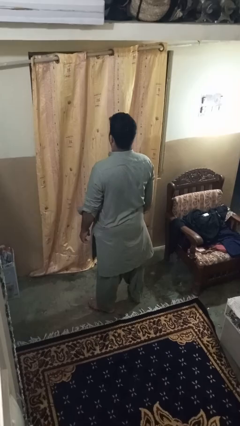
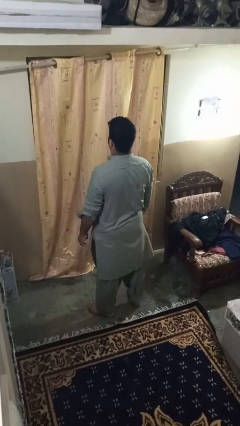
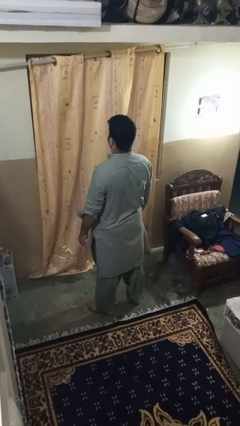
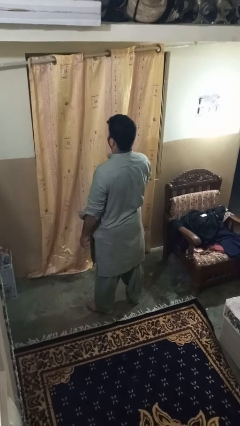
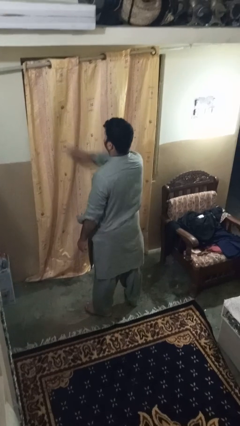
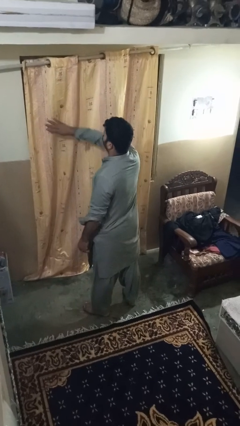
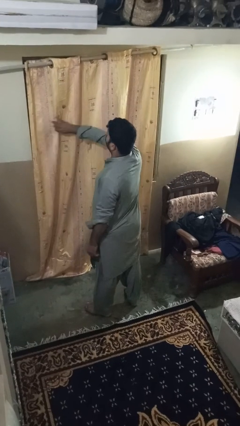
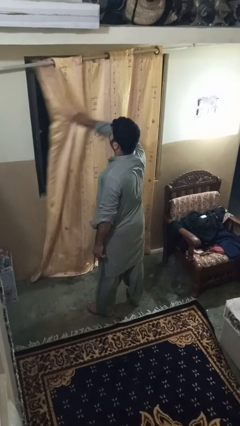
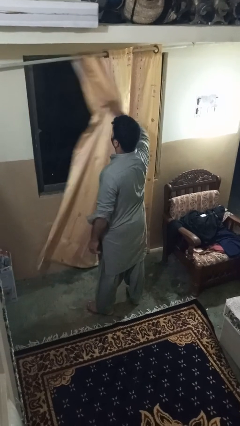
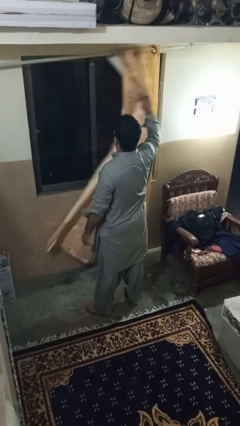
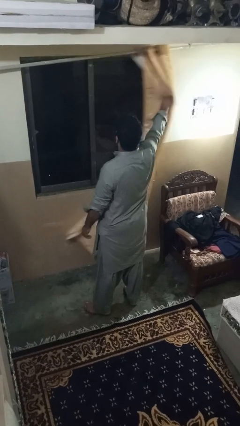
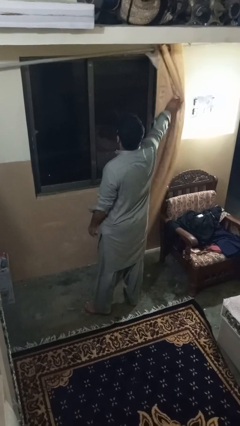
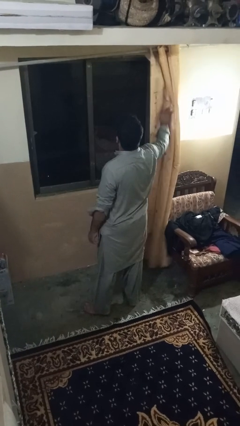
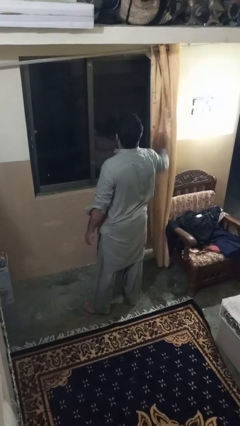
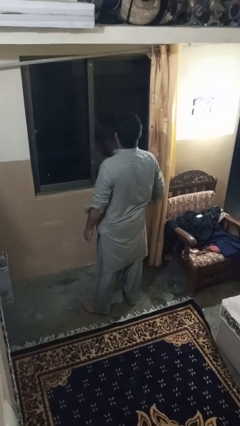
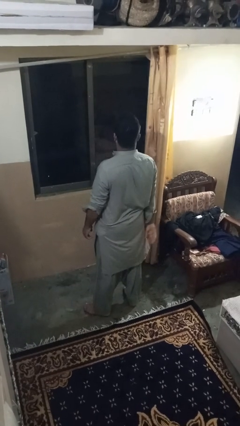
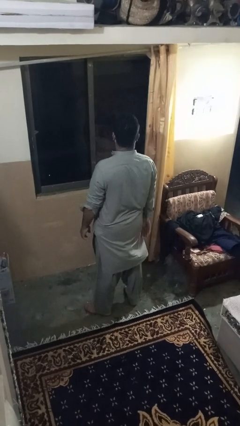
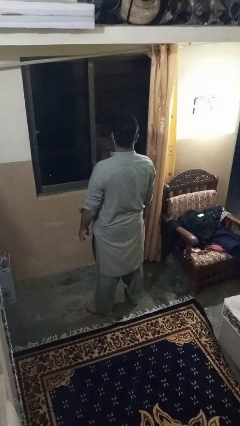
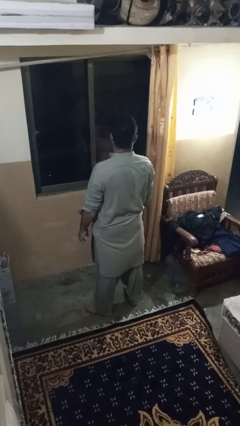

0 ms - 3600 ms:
person opens curtains

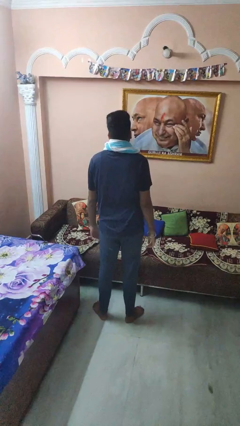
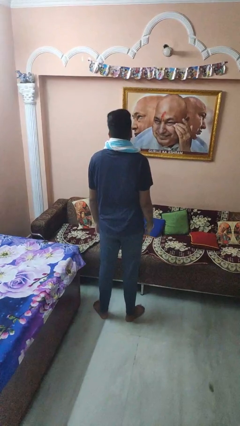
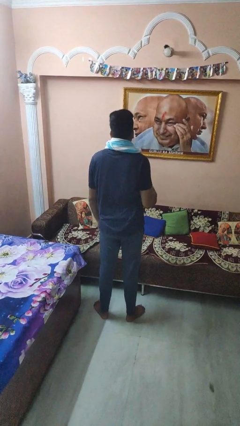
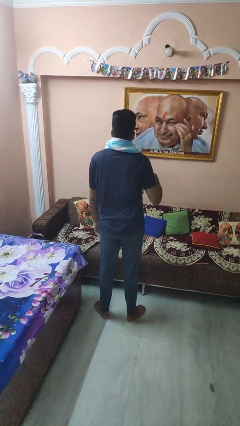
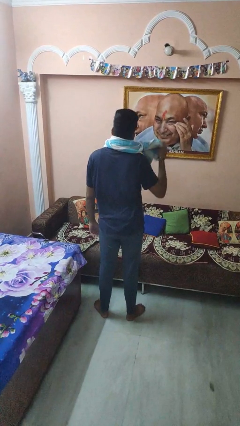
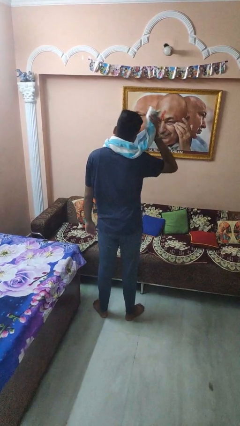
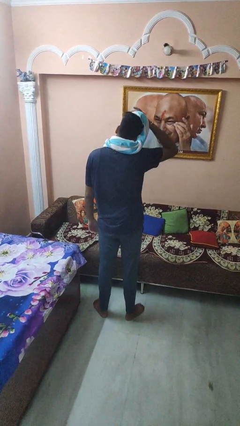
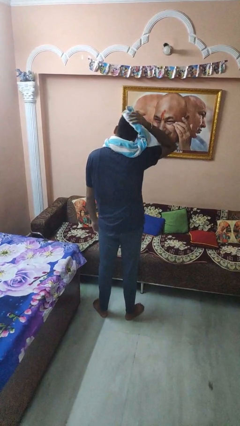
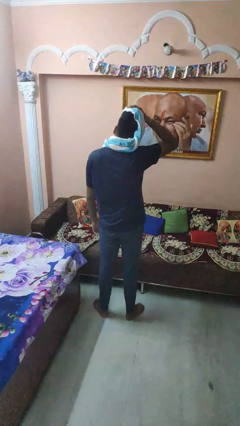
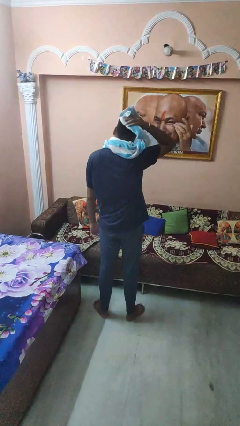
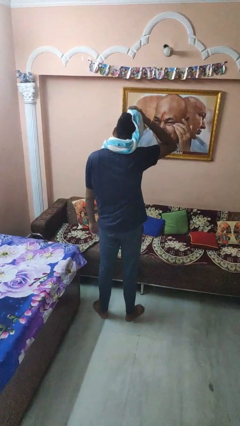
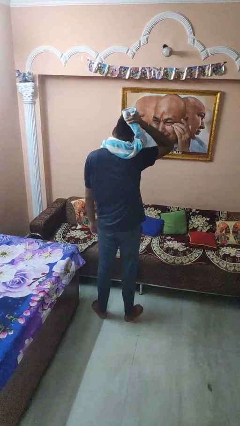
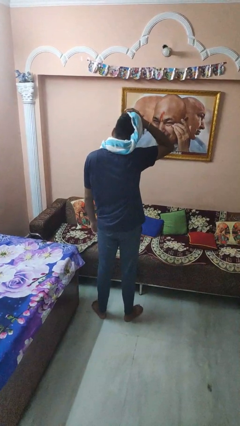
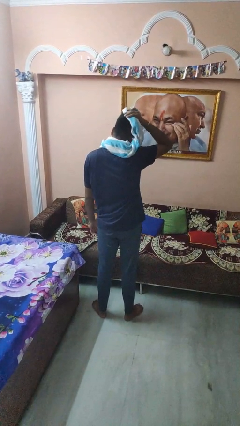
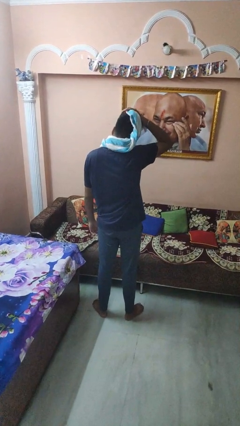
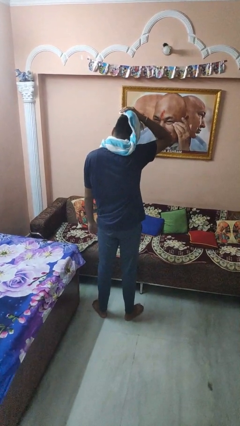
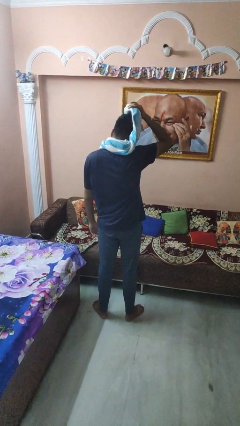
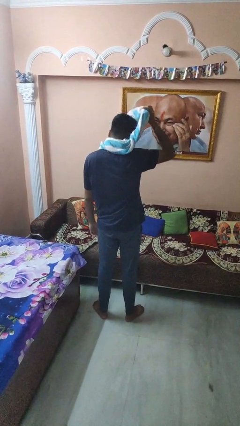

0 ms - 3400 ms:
person dries hair with towel

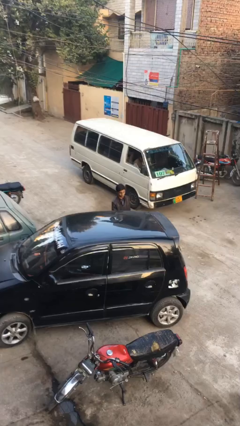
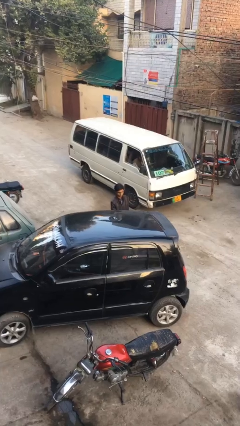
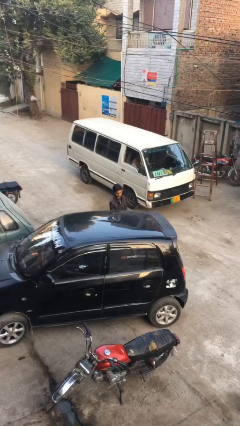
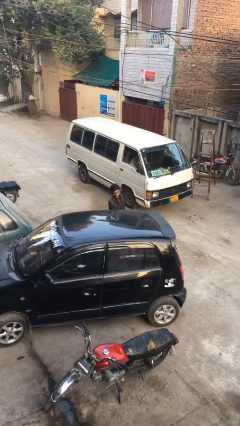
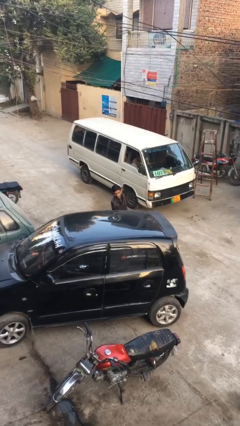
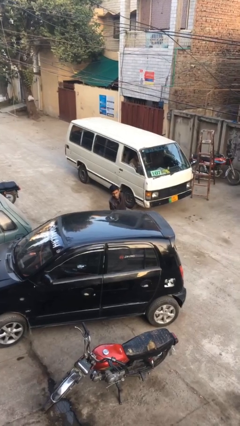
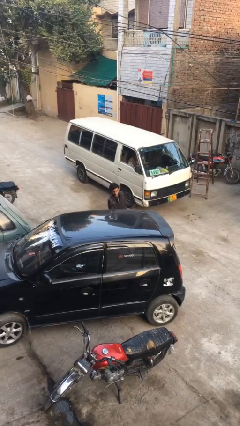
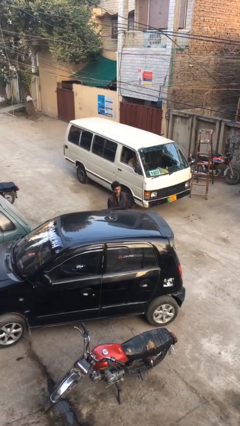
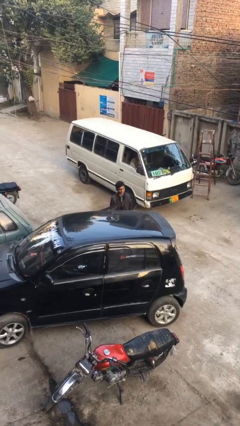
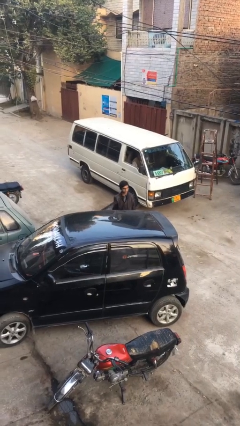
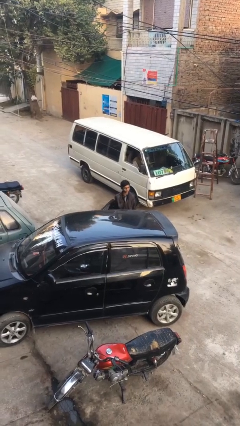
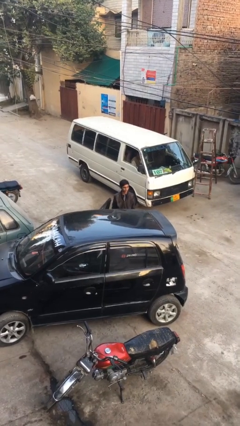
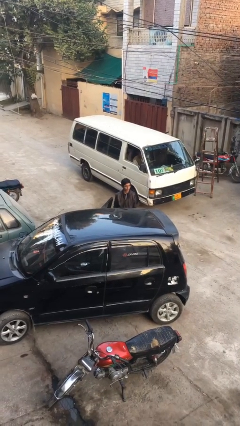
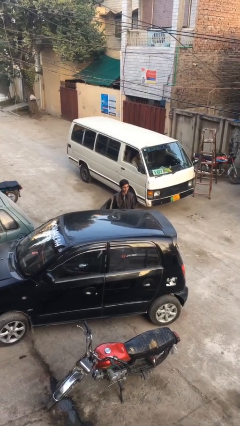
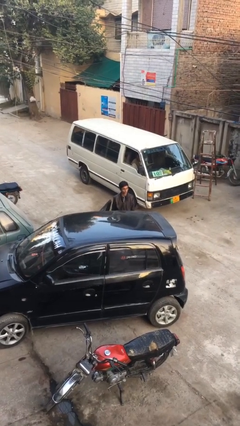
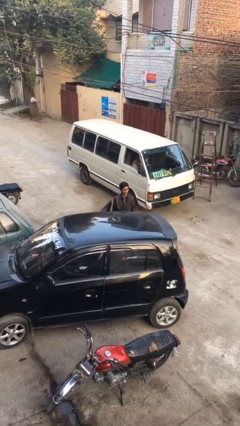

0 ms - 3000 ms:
person opens car door

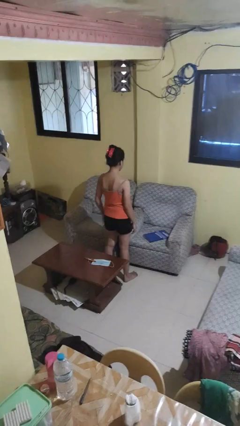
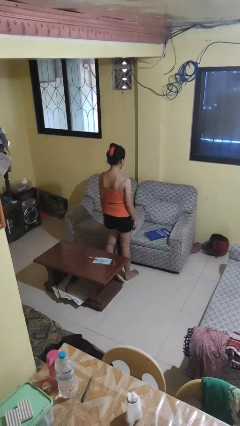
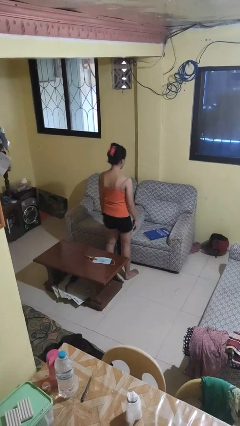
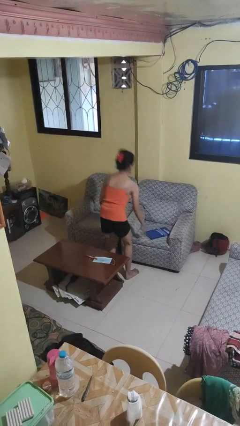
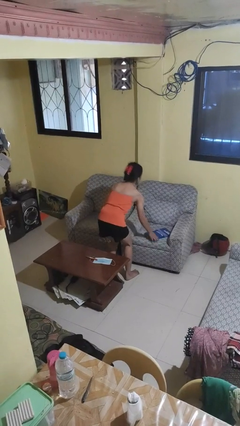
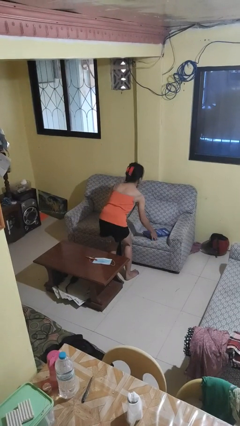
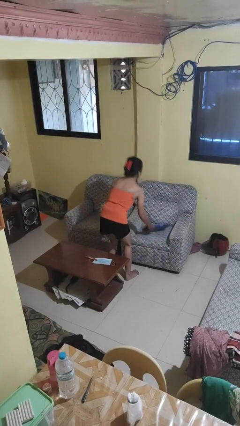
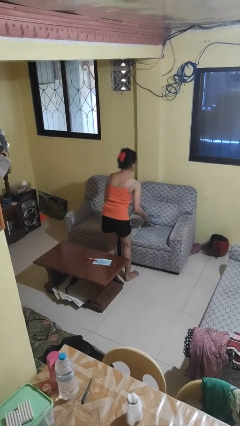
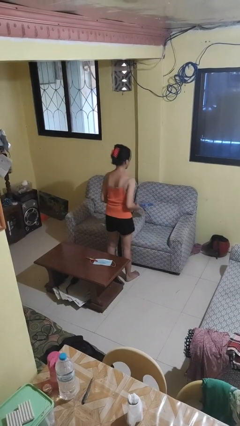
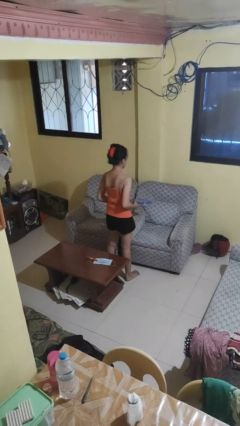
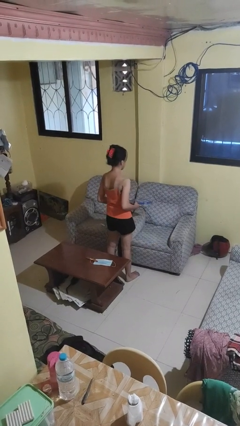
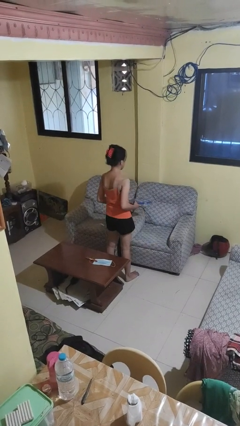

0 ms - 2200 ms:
person picks up object from couch

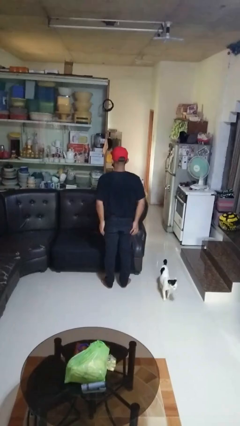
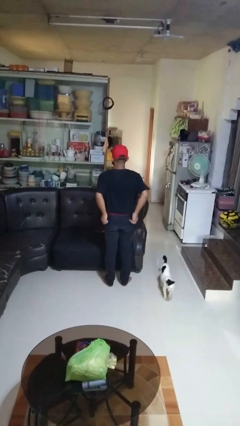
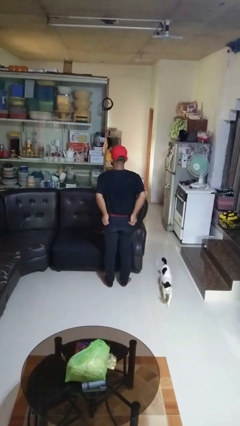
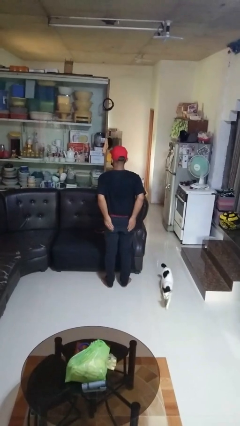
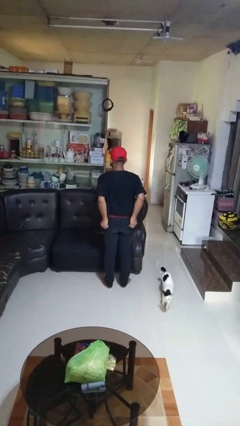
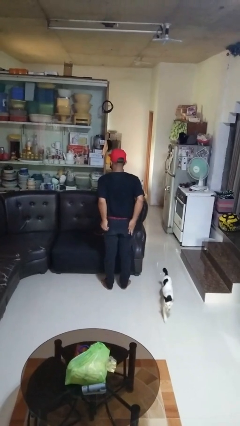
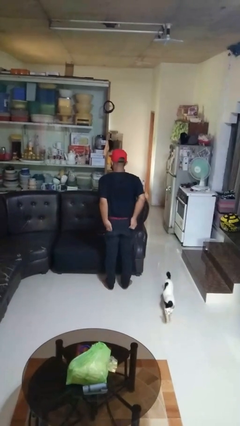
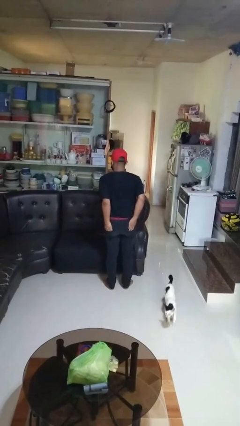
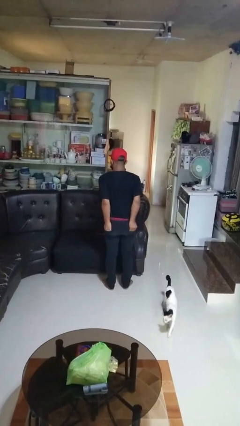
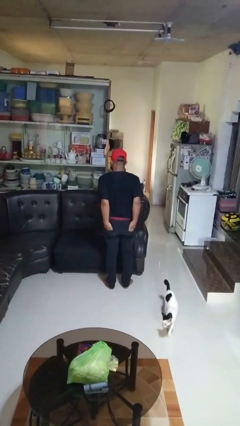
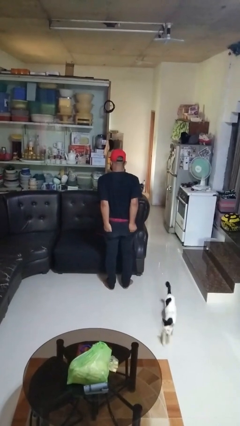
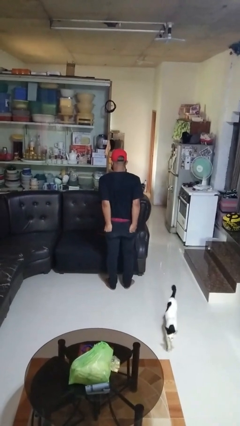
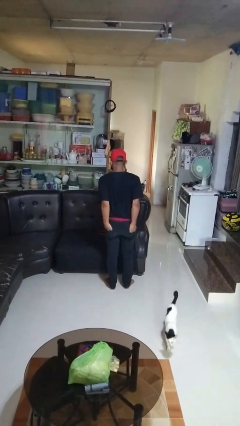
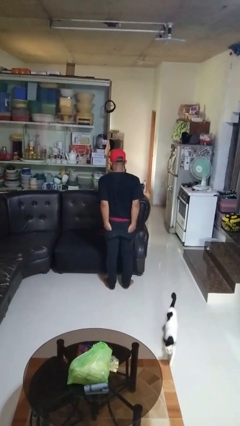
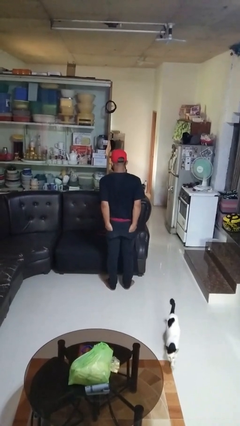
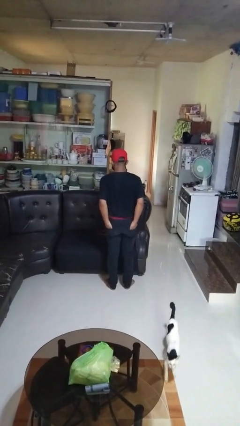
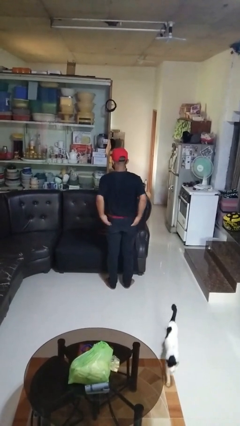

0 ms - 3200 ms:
person puts hands in back pockets

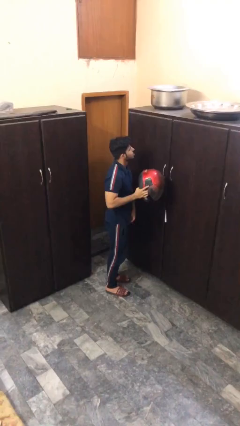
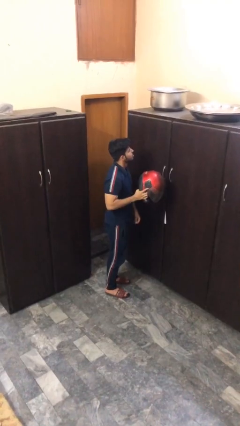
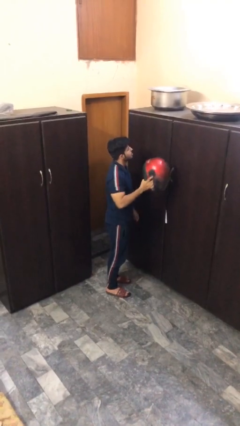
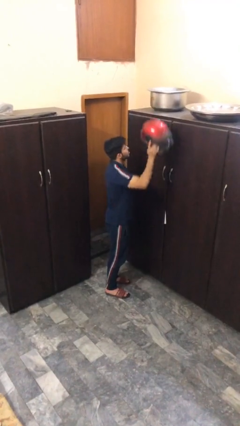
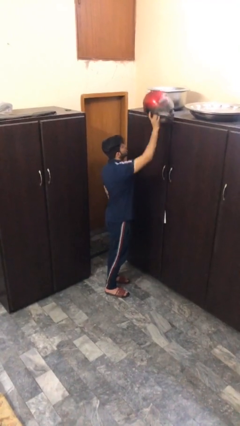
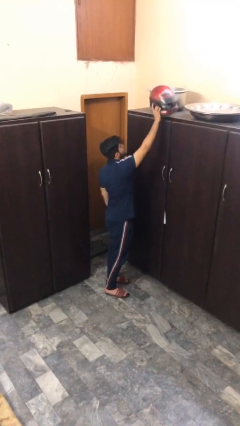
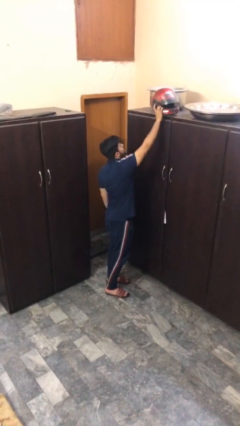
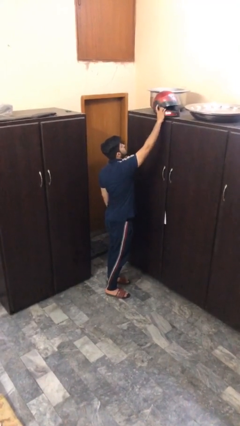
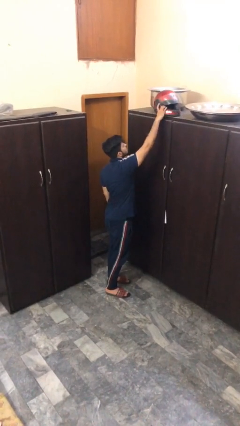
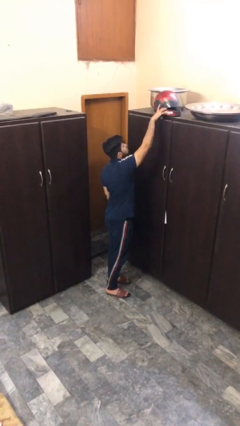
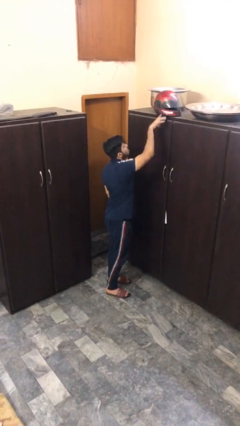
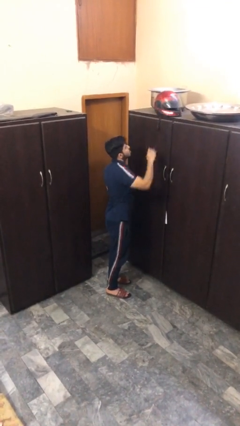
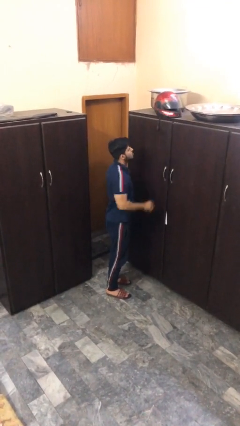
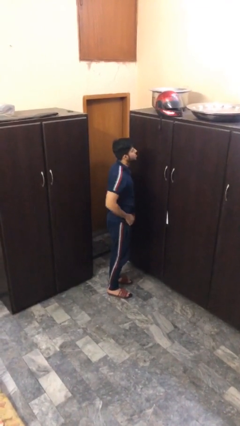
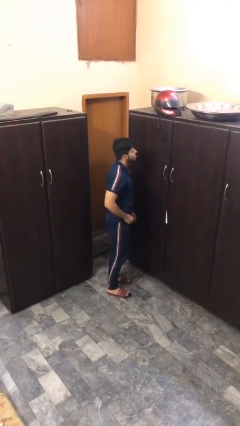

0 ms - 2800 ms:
person puts down object on shelf
